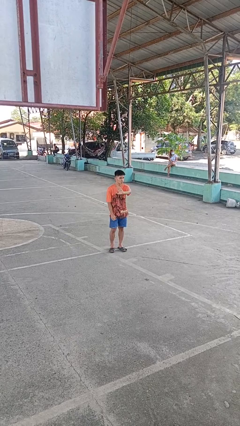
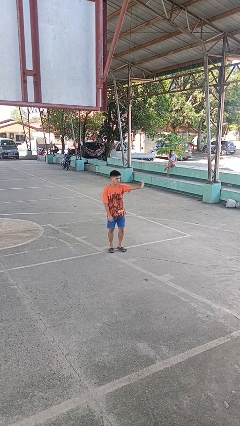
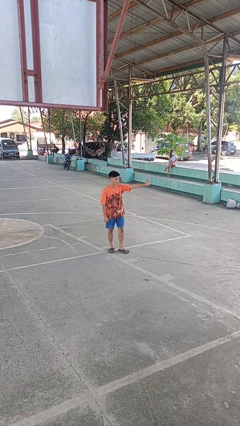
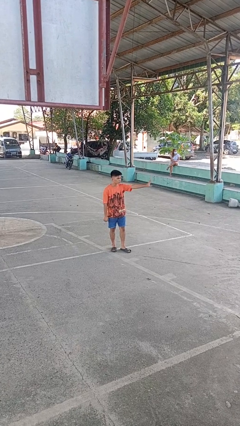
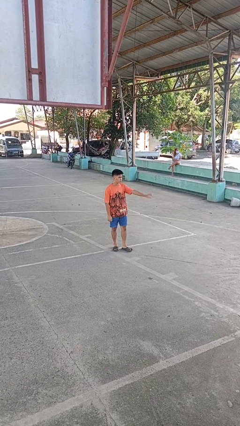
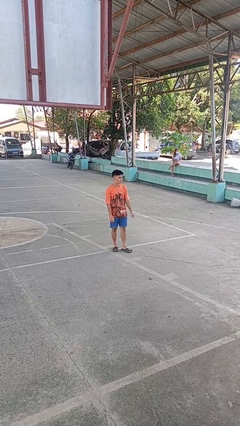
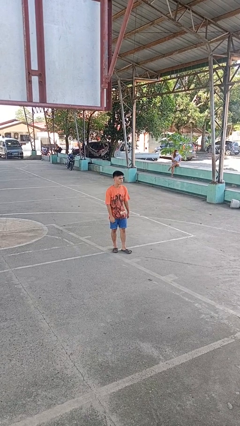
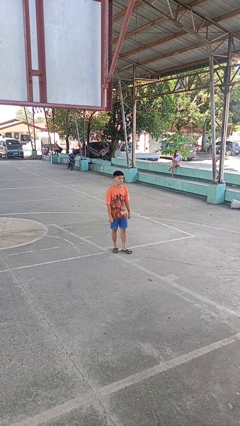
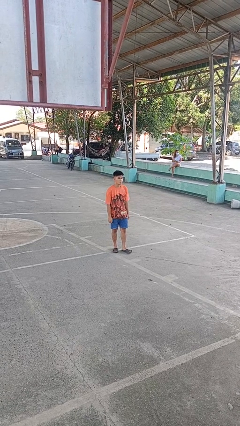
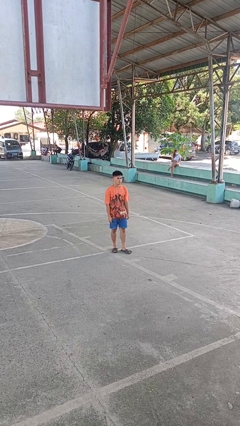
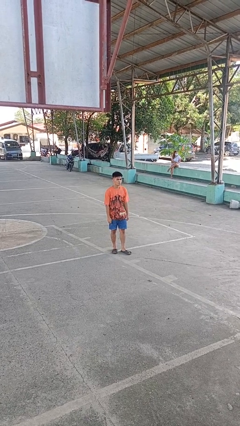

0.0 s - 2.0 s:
person gestures swipe left

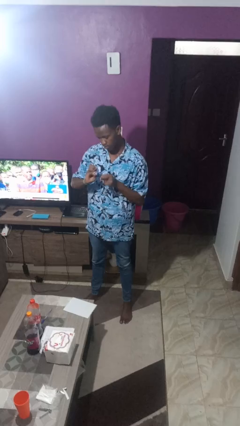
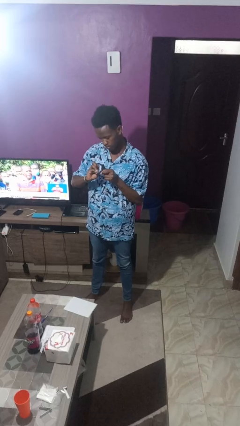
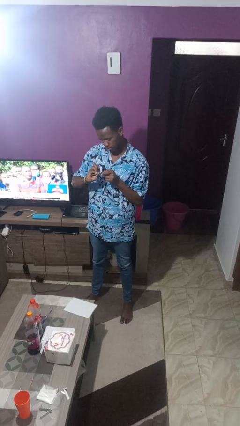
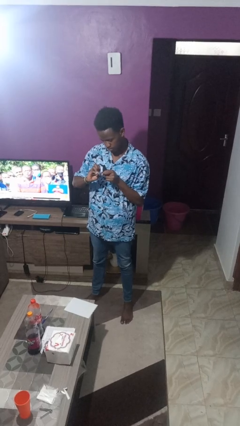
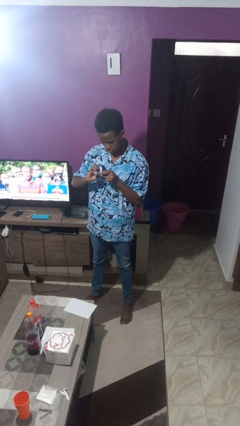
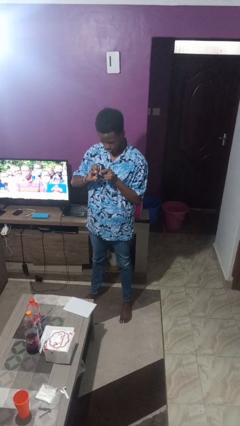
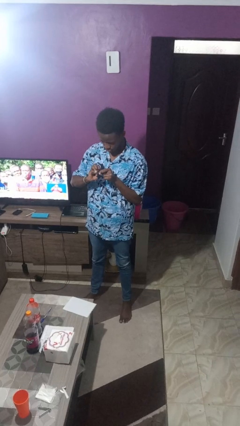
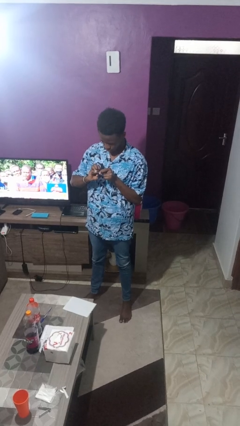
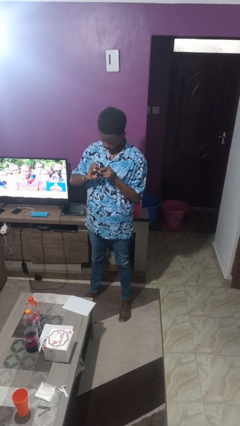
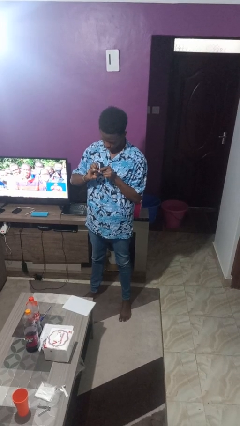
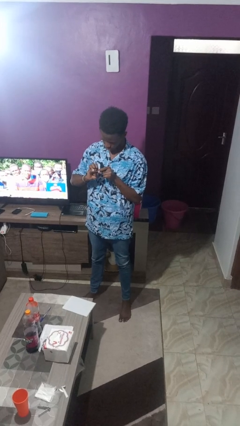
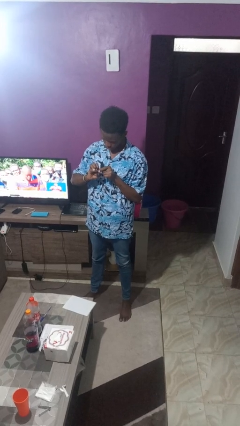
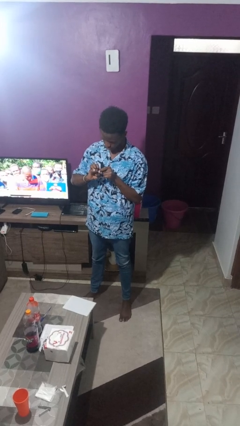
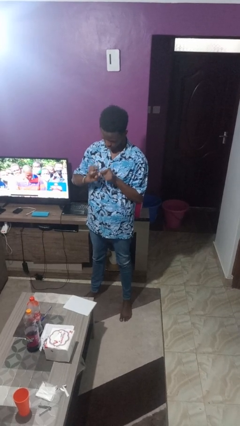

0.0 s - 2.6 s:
person files fingernails

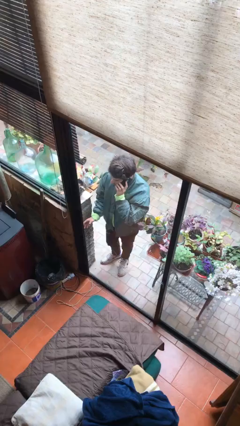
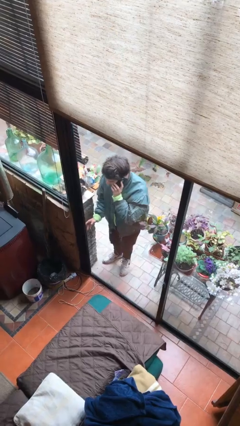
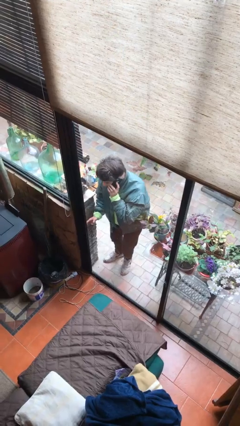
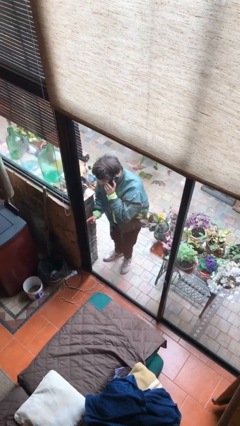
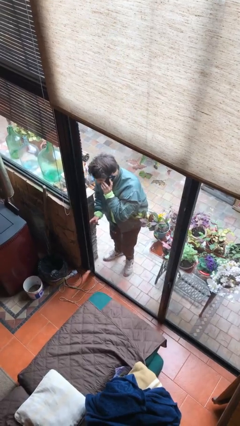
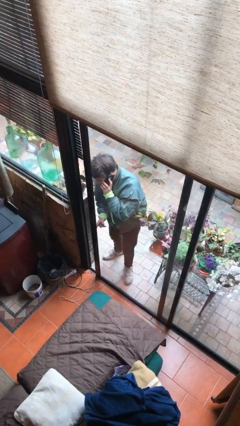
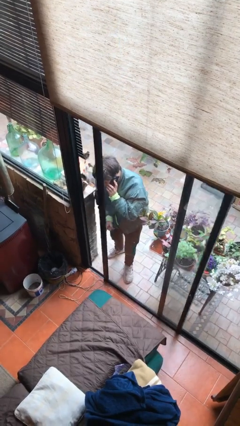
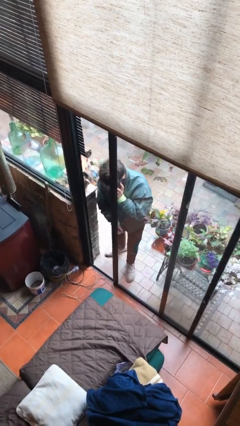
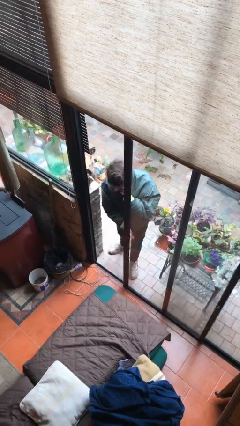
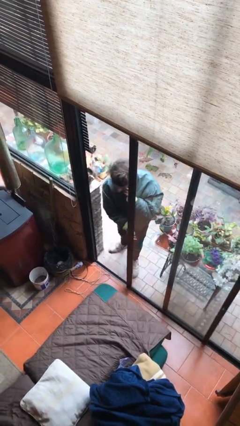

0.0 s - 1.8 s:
person opens facility door

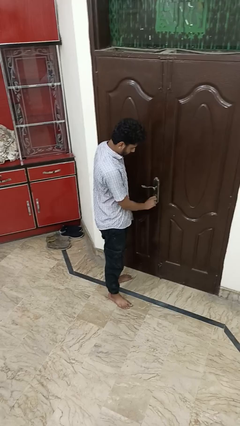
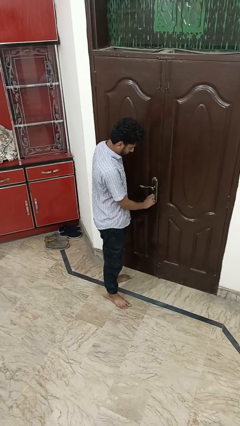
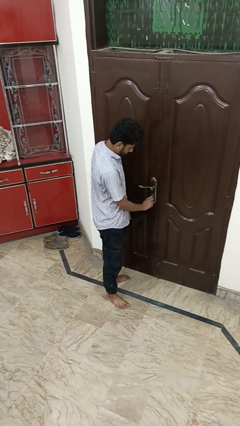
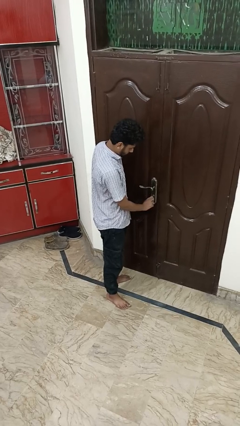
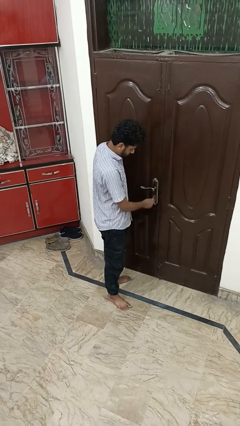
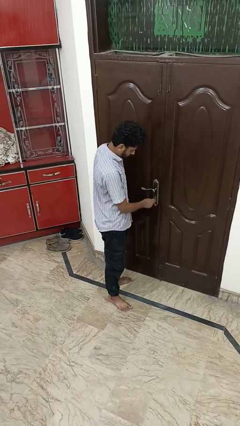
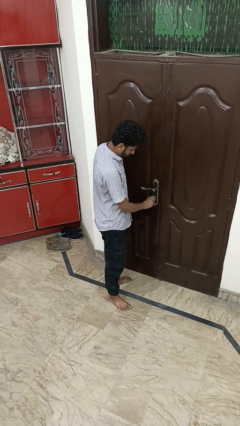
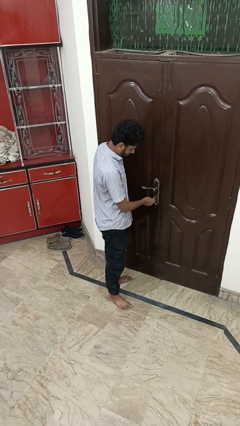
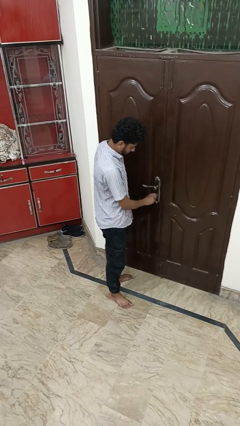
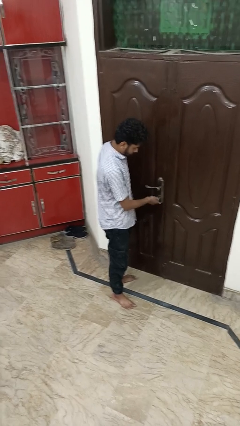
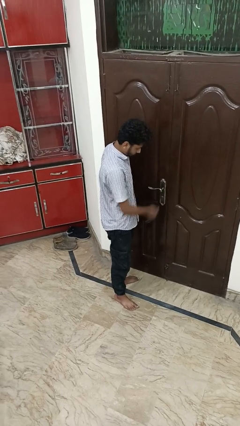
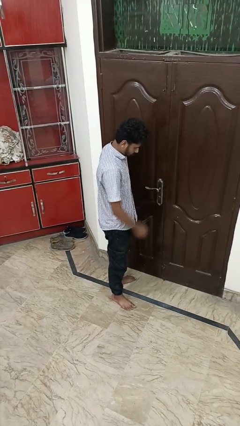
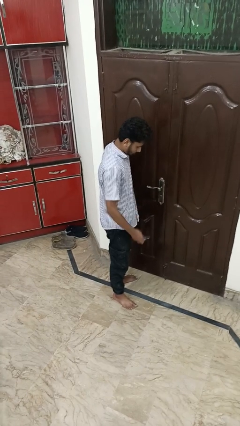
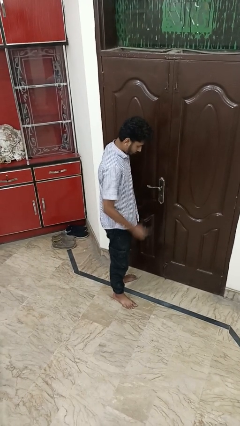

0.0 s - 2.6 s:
person locks door with keys

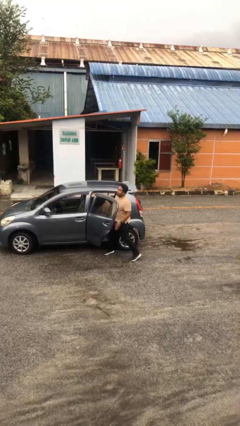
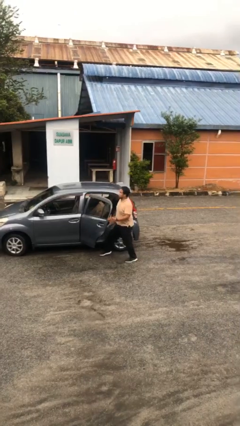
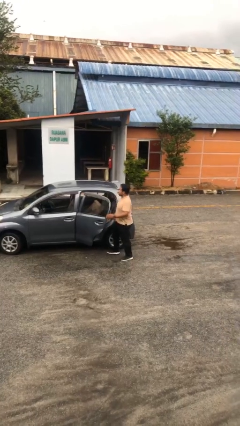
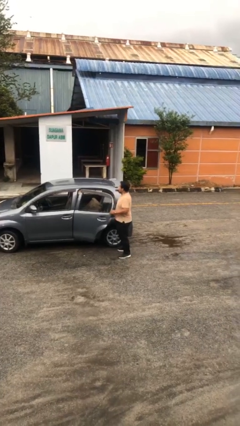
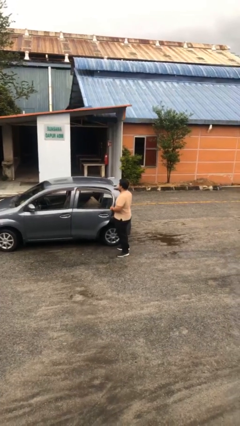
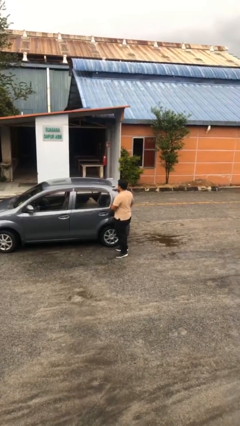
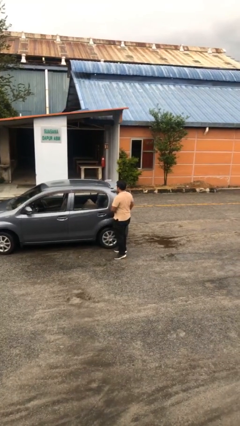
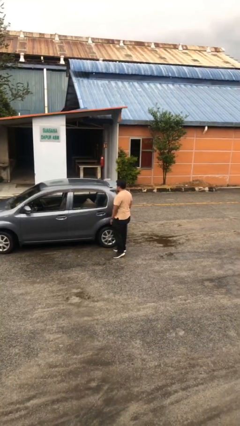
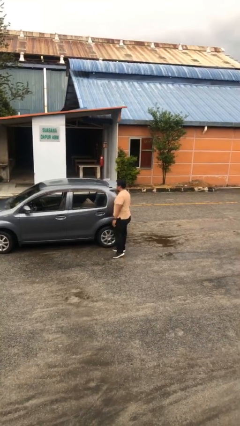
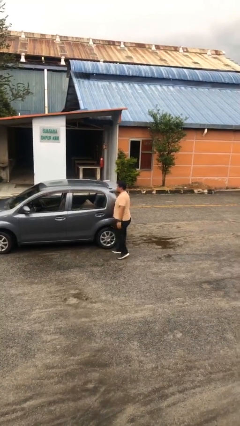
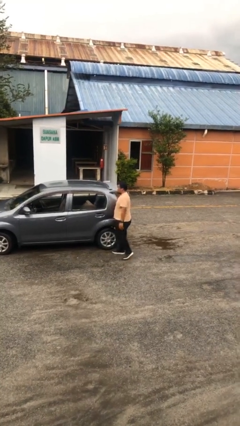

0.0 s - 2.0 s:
person closes car door

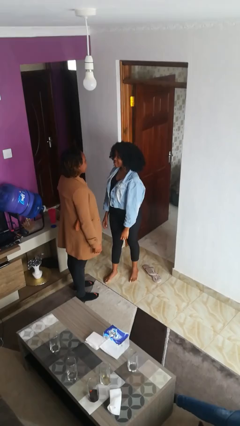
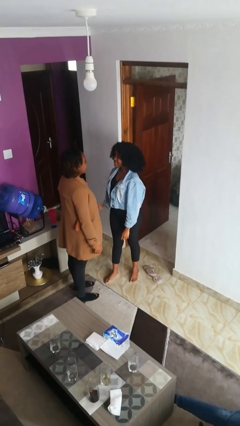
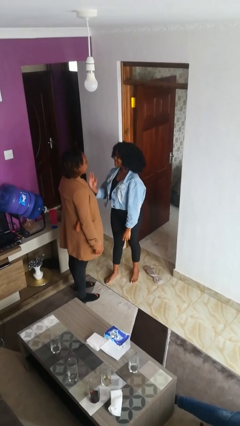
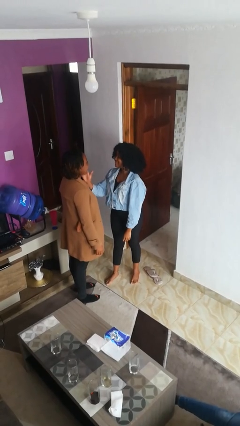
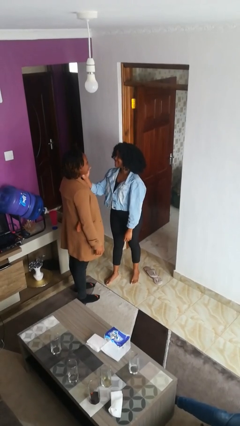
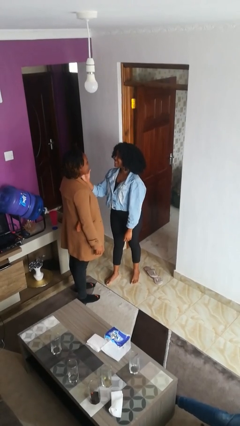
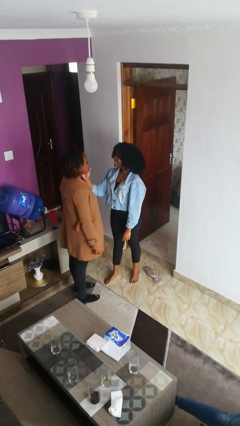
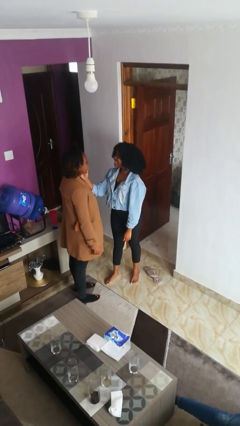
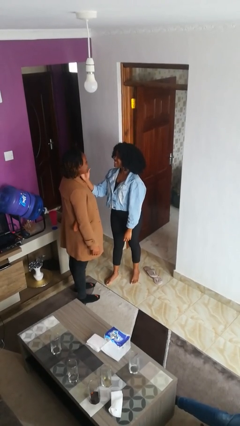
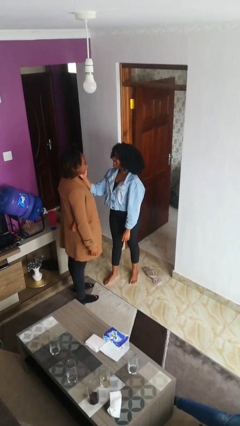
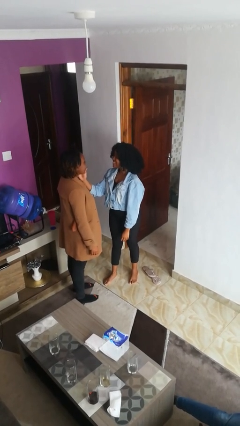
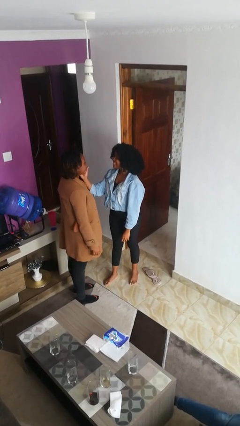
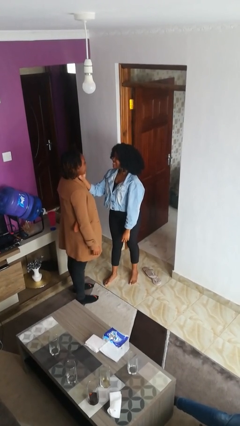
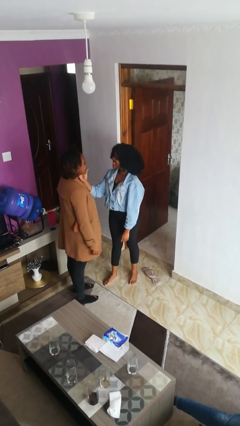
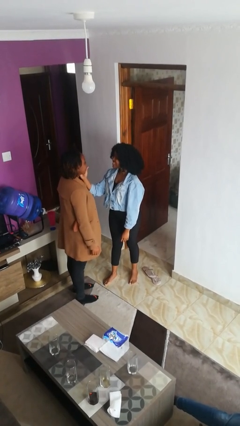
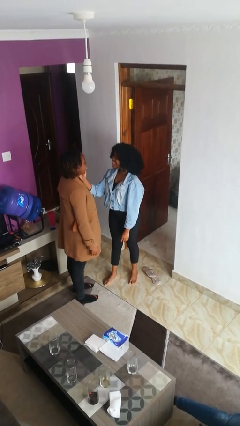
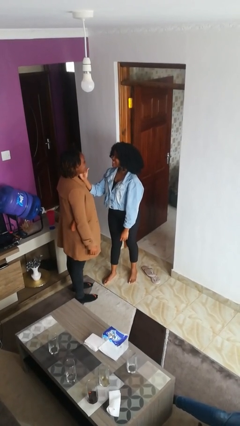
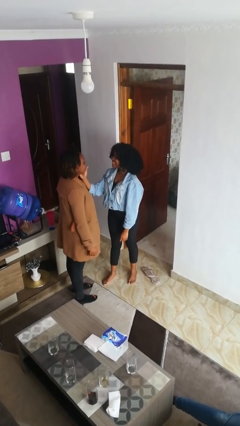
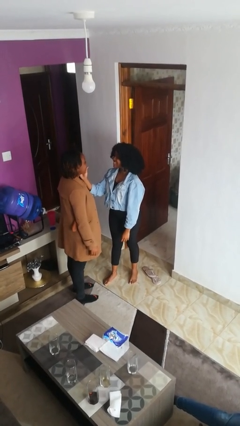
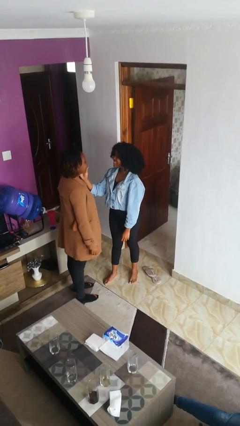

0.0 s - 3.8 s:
person touches face of person

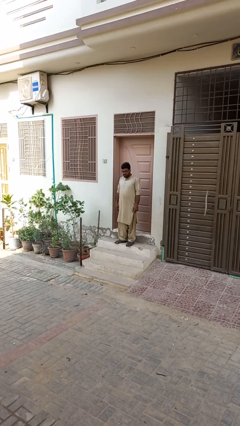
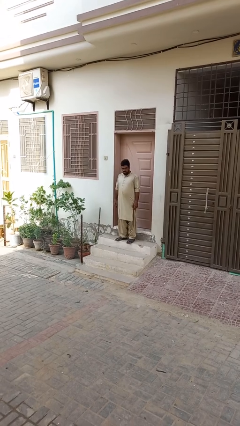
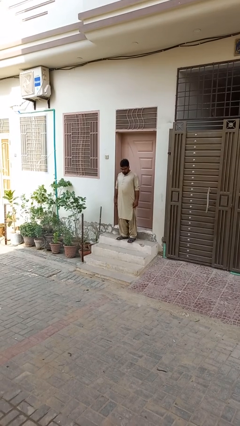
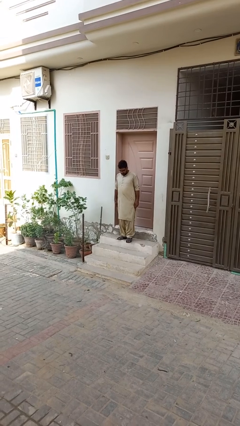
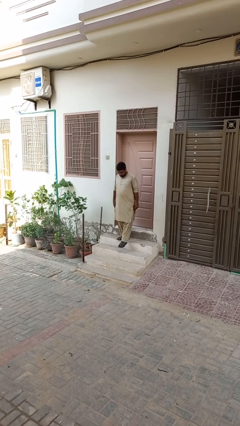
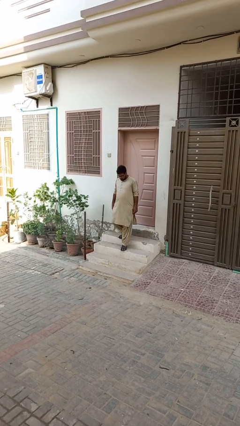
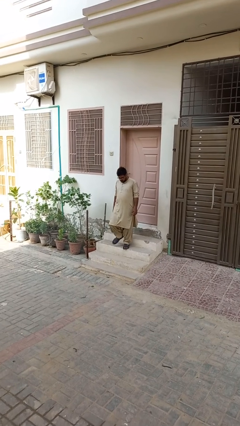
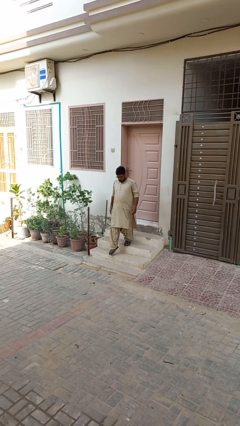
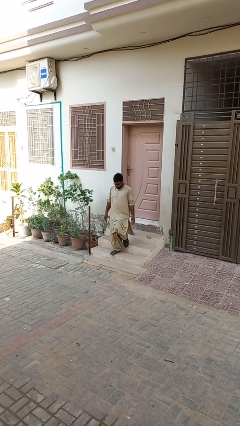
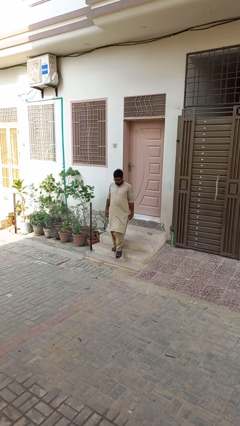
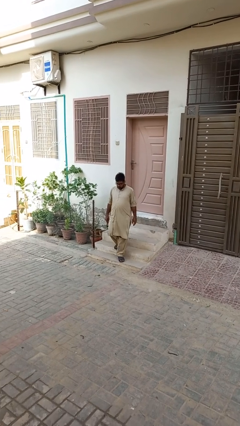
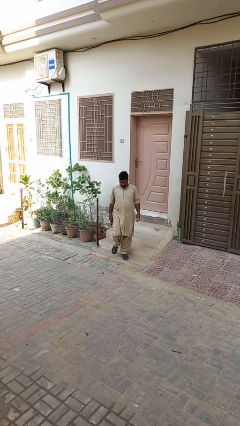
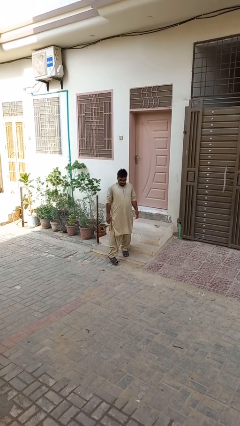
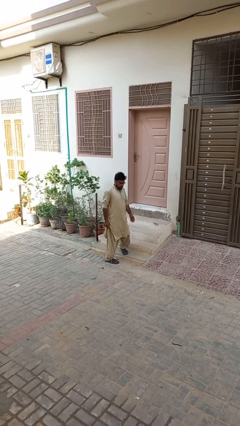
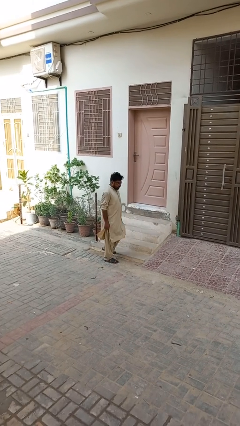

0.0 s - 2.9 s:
person climbs down stairs
